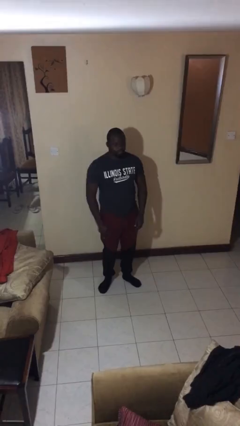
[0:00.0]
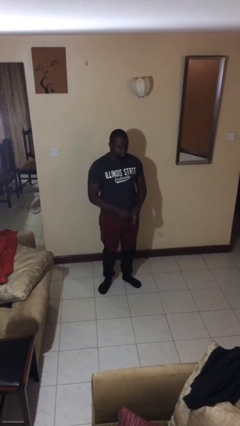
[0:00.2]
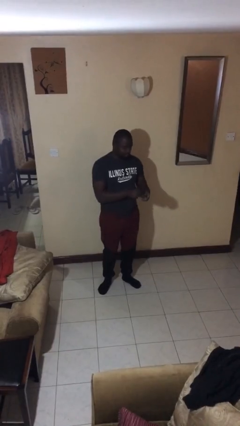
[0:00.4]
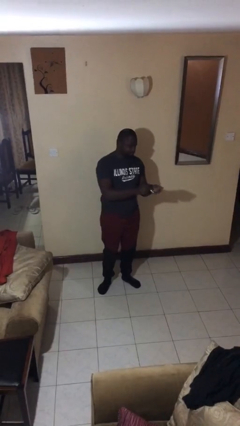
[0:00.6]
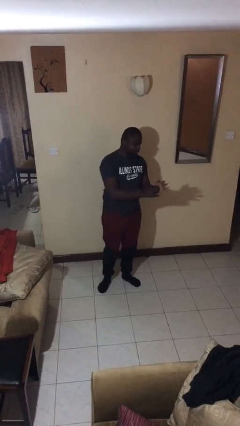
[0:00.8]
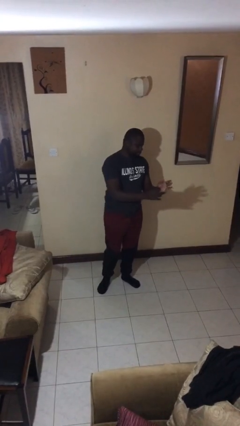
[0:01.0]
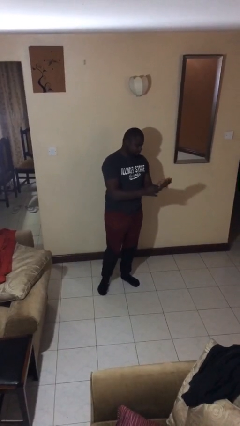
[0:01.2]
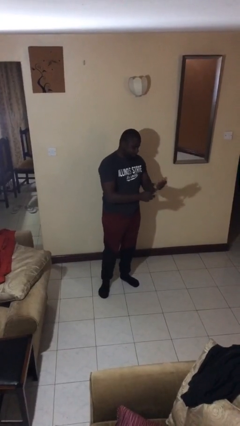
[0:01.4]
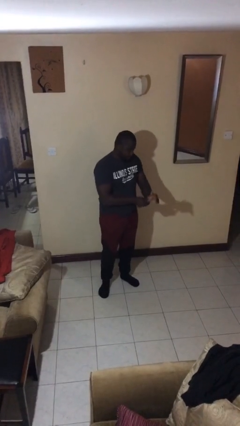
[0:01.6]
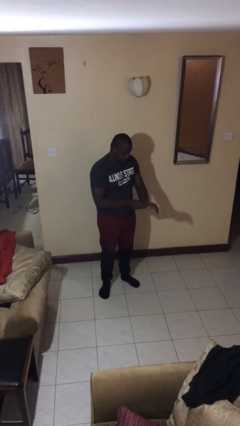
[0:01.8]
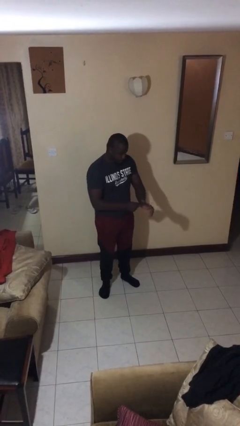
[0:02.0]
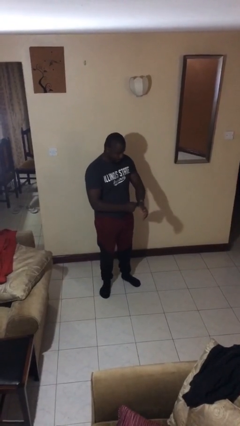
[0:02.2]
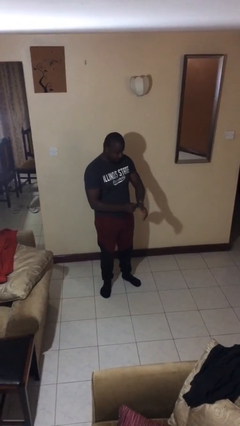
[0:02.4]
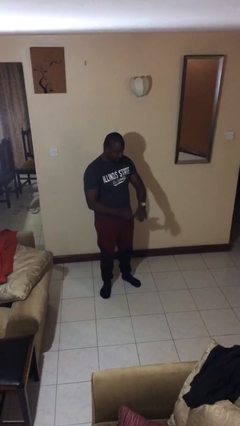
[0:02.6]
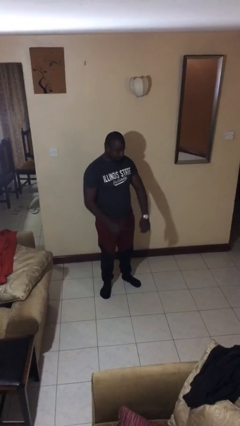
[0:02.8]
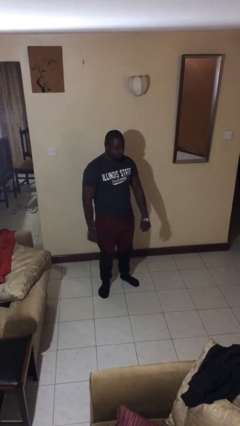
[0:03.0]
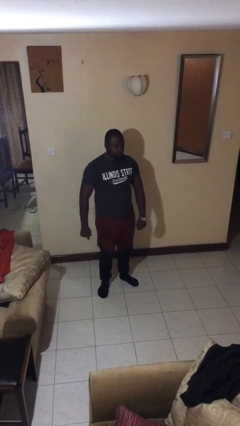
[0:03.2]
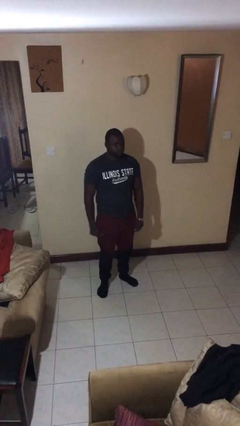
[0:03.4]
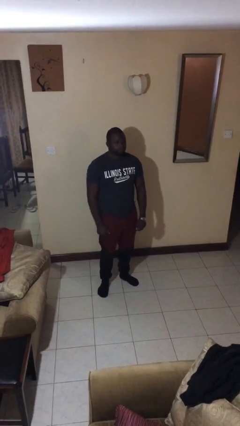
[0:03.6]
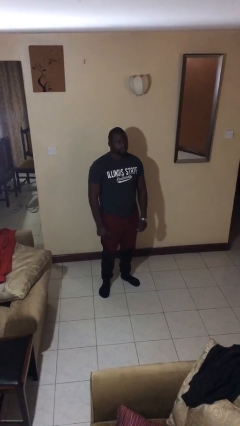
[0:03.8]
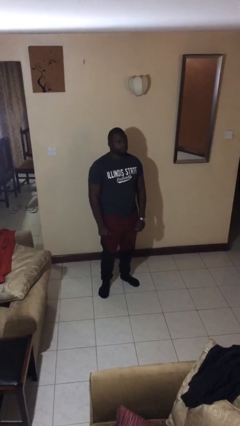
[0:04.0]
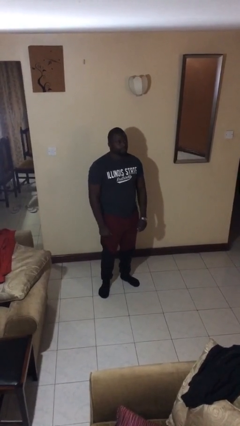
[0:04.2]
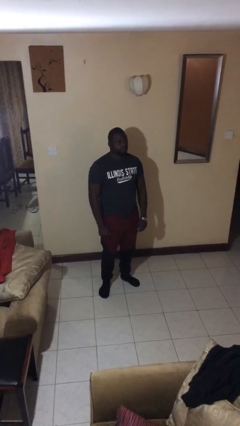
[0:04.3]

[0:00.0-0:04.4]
person puts on wristwatch

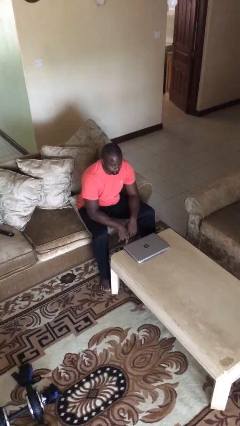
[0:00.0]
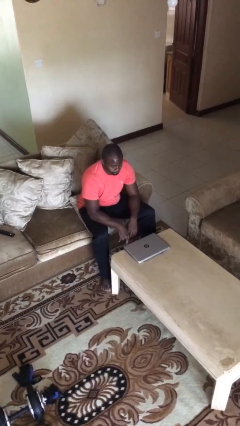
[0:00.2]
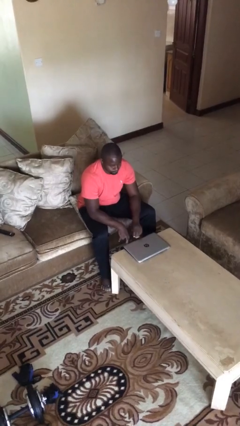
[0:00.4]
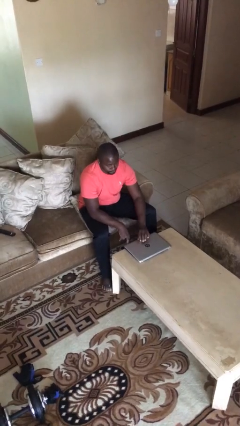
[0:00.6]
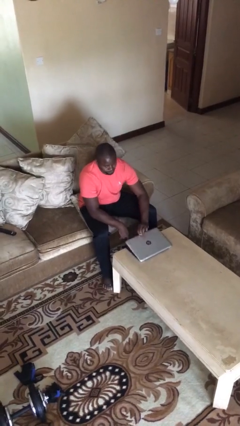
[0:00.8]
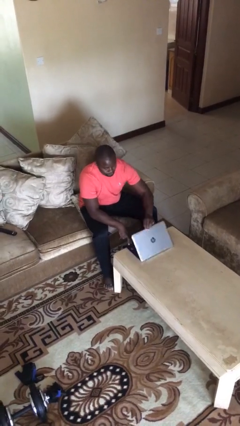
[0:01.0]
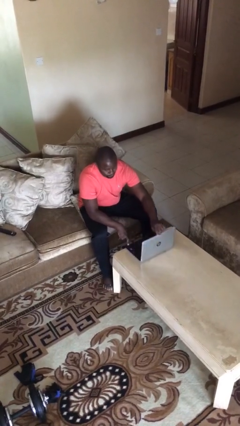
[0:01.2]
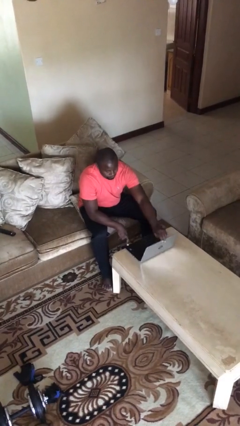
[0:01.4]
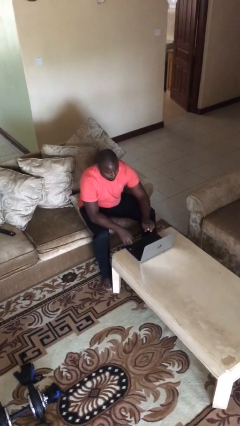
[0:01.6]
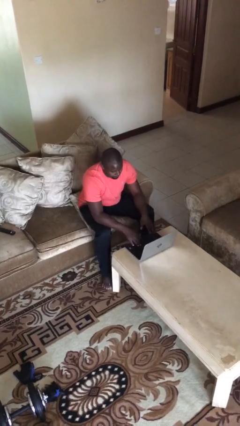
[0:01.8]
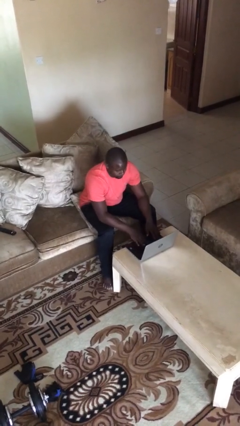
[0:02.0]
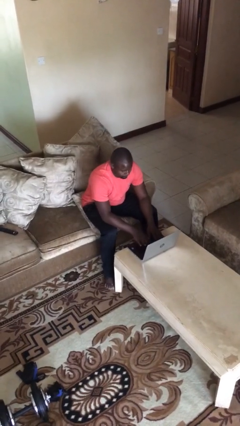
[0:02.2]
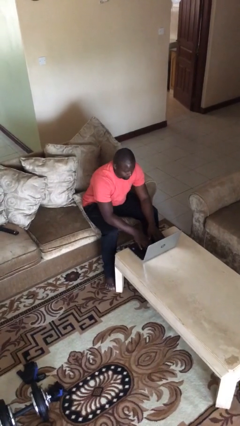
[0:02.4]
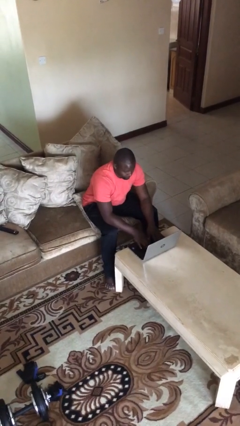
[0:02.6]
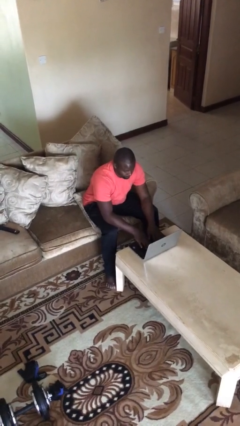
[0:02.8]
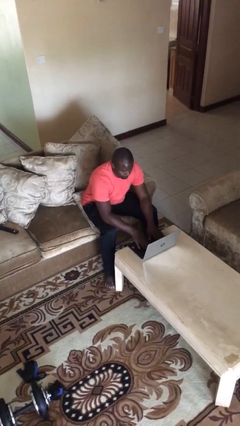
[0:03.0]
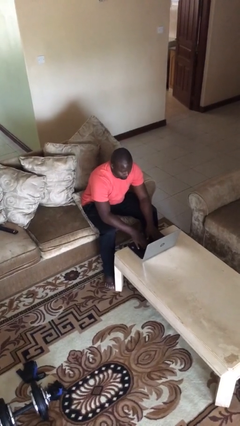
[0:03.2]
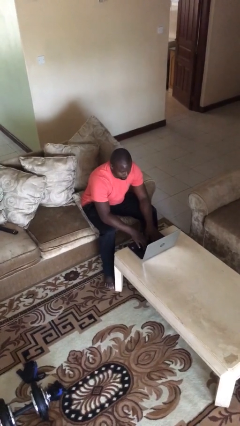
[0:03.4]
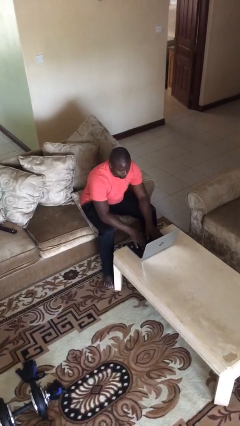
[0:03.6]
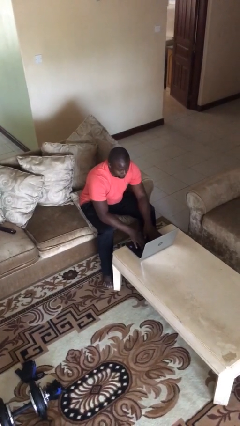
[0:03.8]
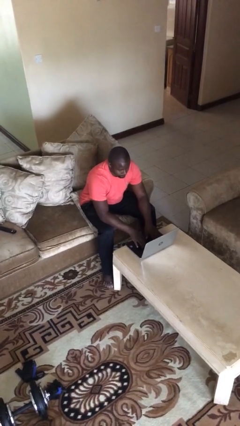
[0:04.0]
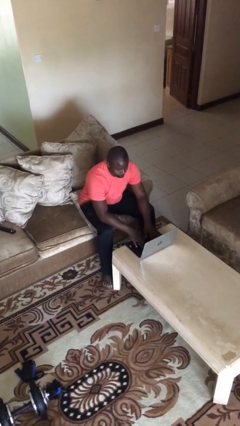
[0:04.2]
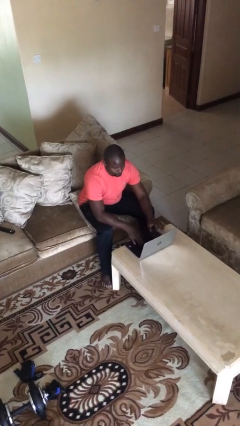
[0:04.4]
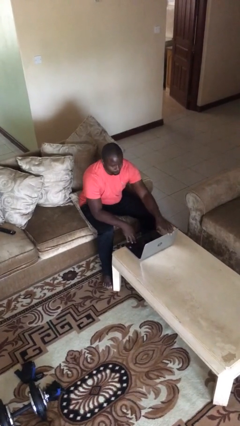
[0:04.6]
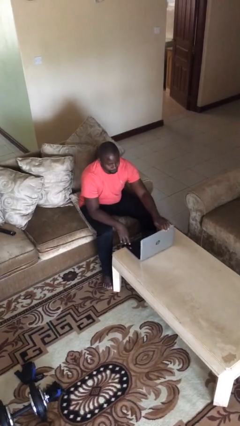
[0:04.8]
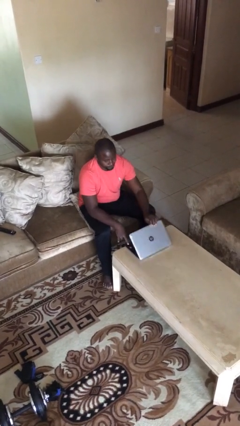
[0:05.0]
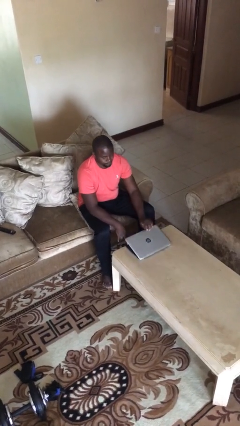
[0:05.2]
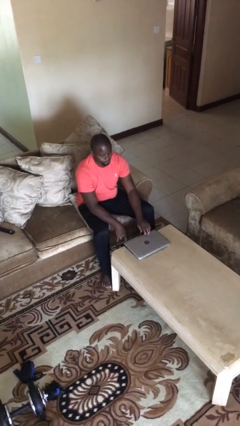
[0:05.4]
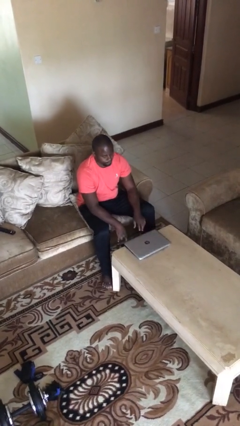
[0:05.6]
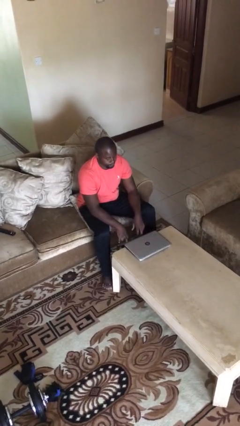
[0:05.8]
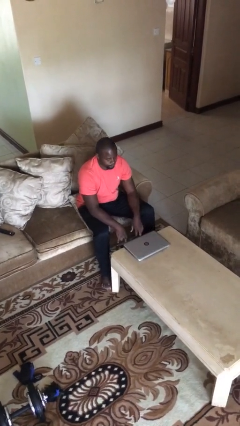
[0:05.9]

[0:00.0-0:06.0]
person interacts with laptop

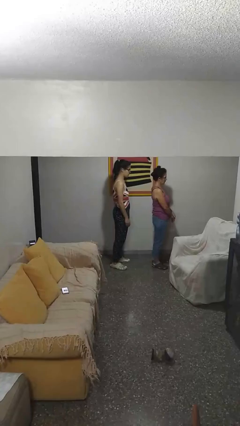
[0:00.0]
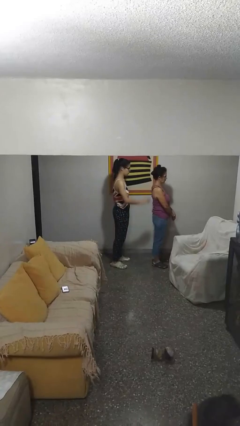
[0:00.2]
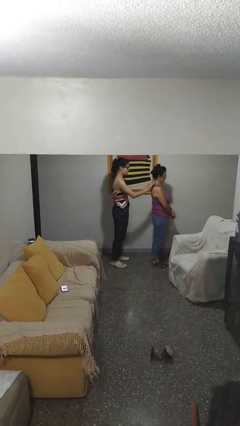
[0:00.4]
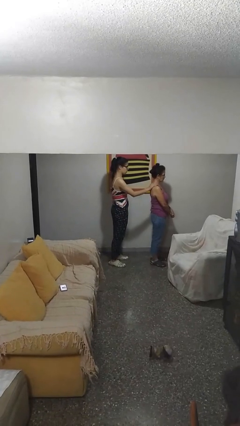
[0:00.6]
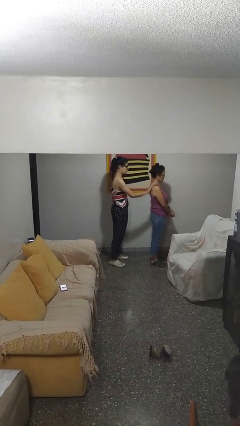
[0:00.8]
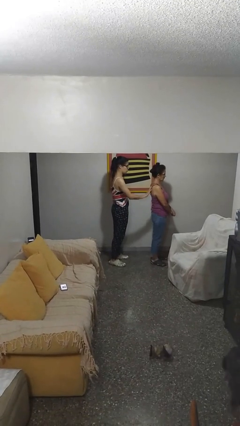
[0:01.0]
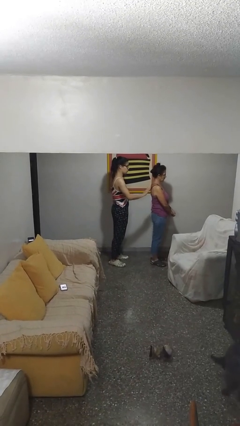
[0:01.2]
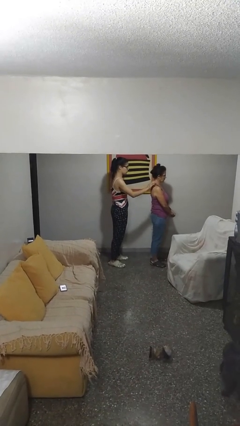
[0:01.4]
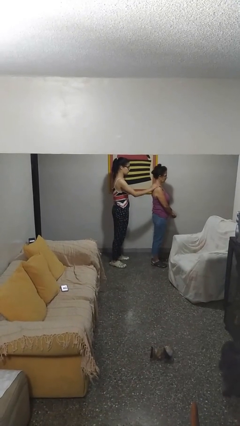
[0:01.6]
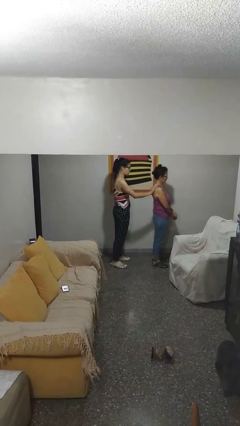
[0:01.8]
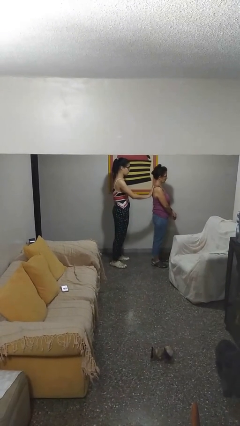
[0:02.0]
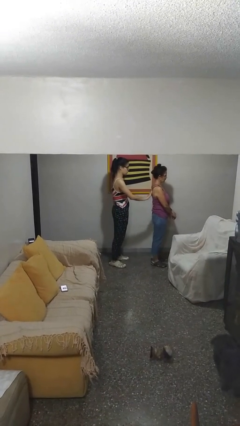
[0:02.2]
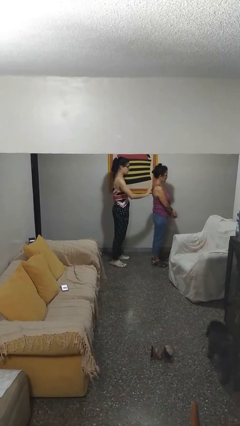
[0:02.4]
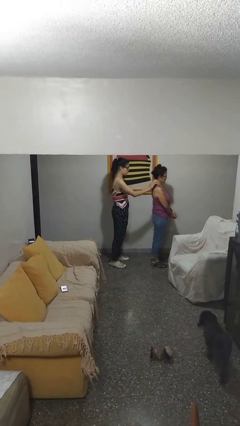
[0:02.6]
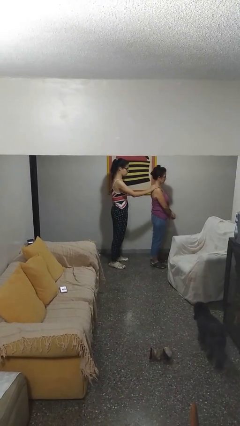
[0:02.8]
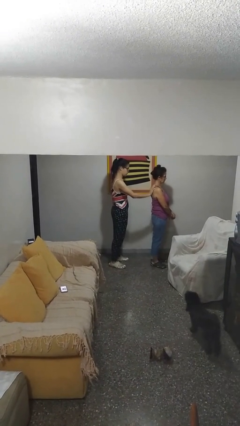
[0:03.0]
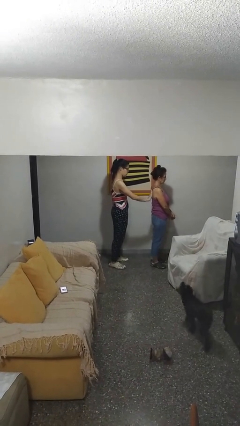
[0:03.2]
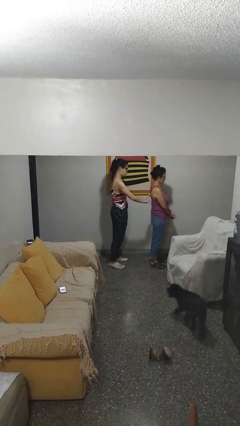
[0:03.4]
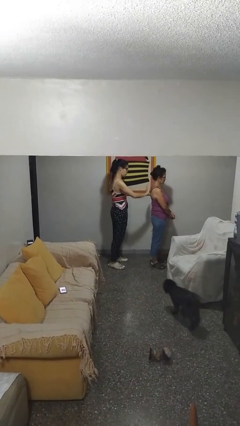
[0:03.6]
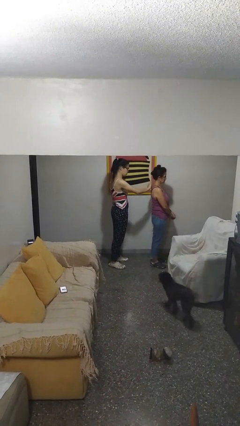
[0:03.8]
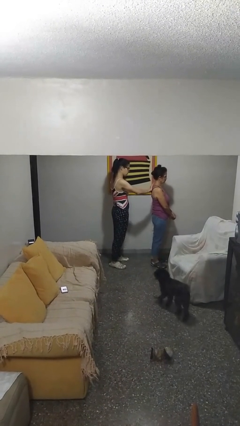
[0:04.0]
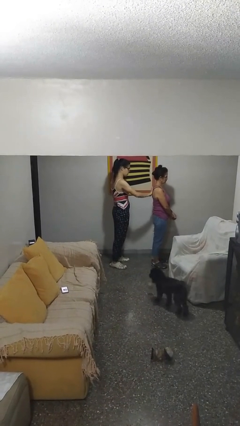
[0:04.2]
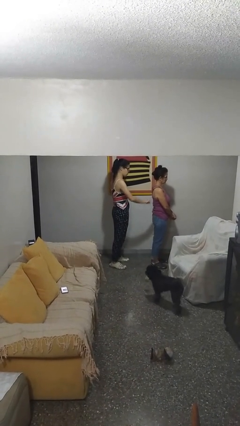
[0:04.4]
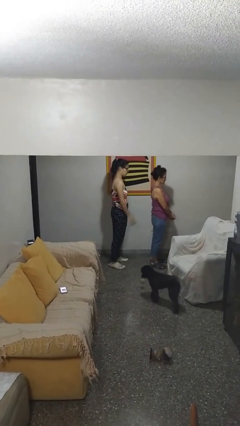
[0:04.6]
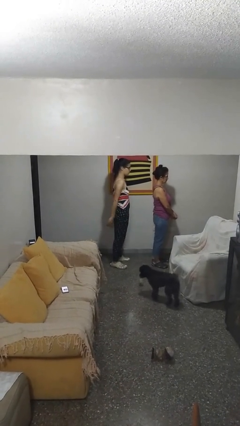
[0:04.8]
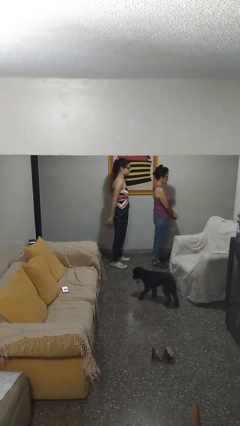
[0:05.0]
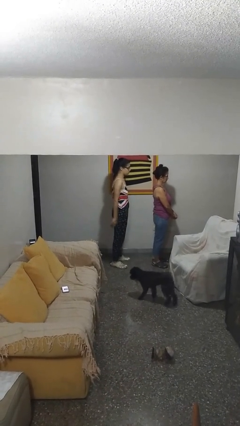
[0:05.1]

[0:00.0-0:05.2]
person touches back of person

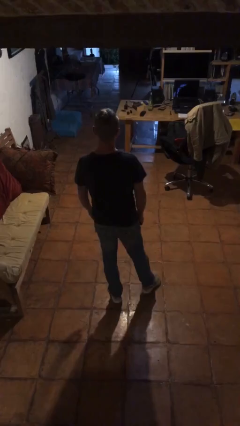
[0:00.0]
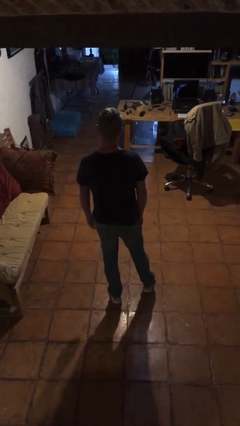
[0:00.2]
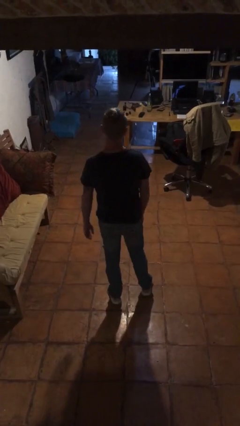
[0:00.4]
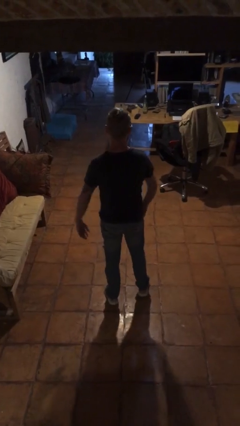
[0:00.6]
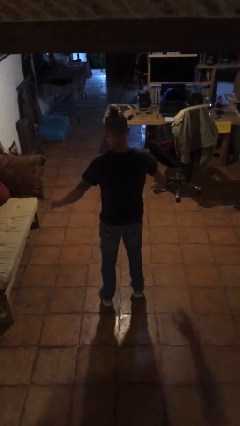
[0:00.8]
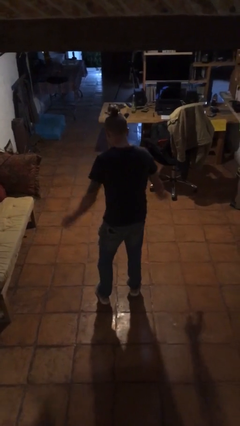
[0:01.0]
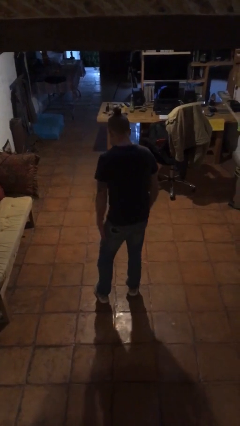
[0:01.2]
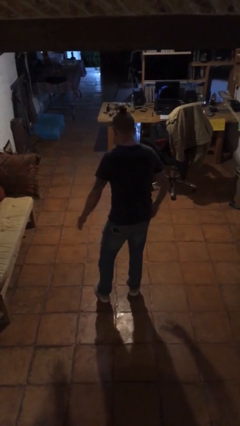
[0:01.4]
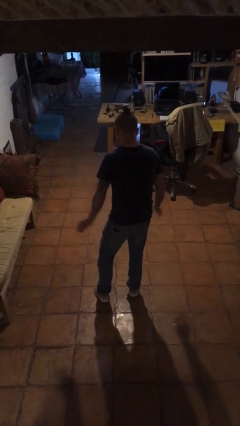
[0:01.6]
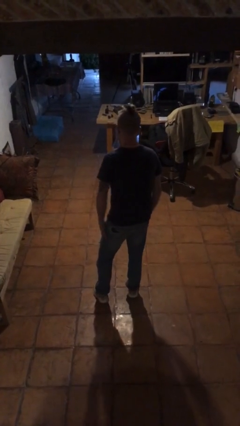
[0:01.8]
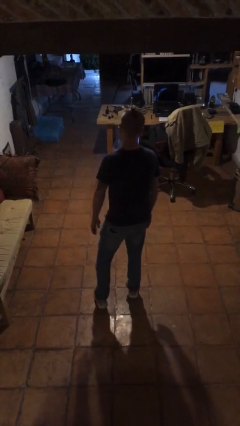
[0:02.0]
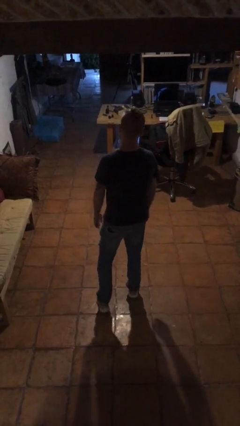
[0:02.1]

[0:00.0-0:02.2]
person slaps hands on thighs
